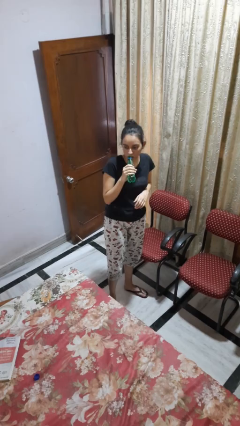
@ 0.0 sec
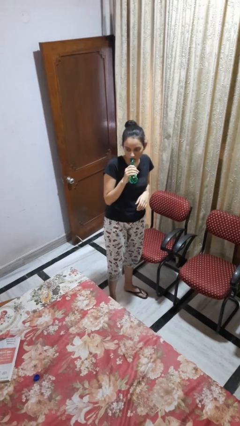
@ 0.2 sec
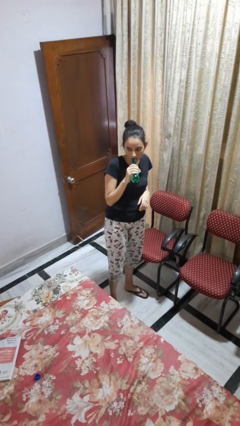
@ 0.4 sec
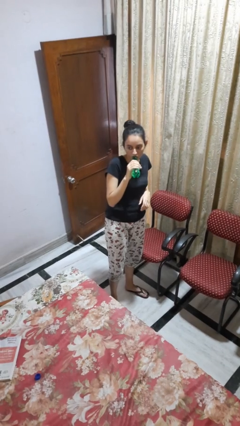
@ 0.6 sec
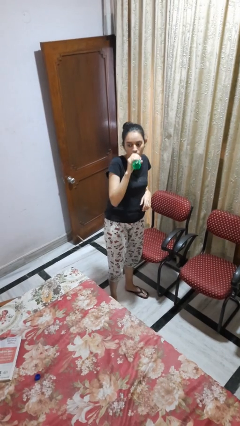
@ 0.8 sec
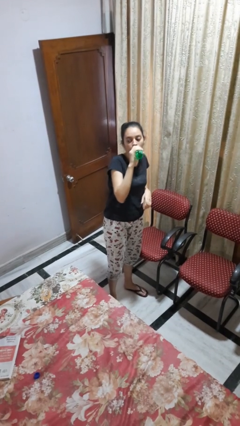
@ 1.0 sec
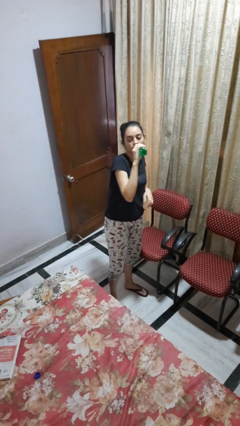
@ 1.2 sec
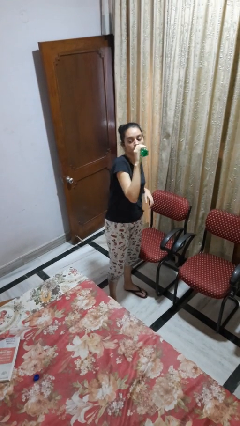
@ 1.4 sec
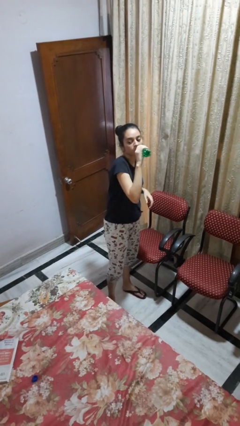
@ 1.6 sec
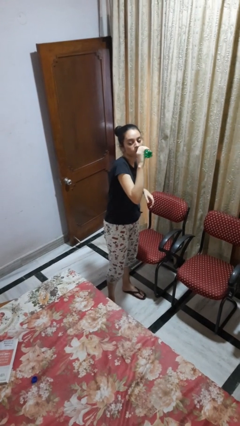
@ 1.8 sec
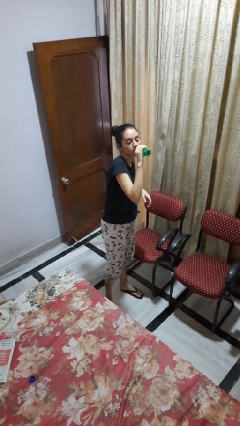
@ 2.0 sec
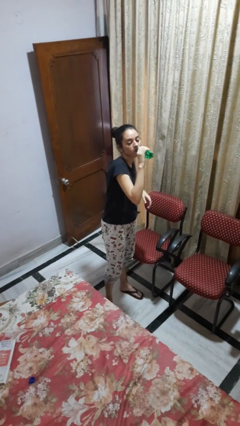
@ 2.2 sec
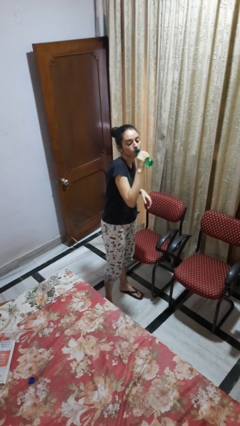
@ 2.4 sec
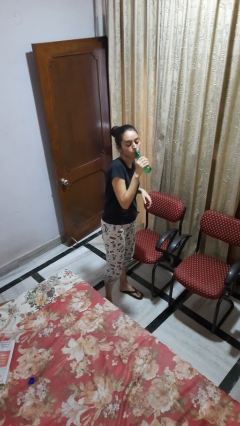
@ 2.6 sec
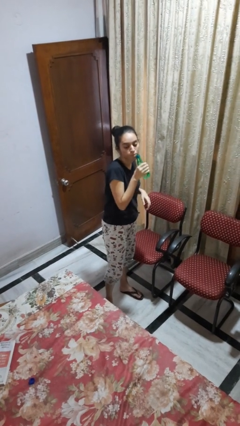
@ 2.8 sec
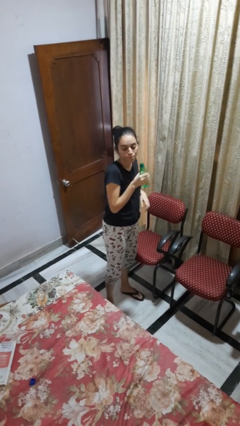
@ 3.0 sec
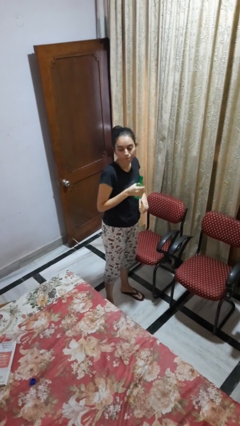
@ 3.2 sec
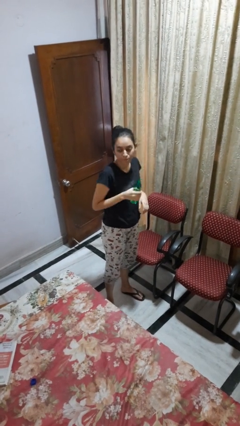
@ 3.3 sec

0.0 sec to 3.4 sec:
person drinks from bottle

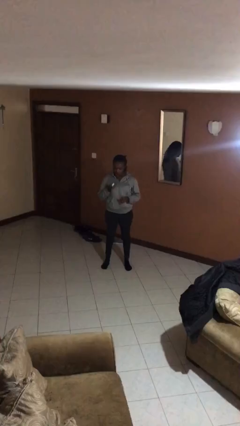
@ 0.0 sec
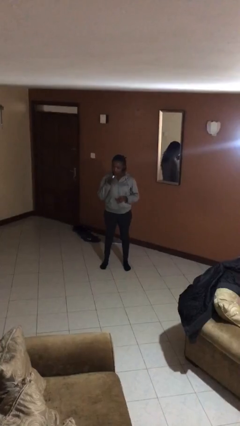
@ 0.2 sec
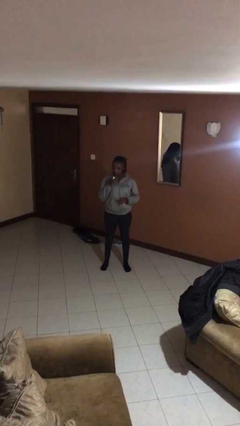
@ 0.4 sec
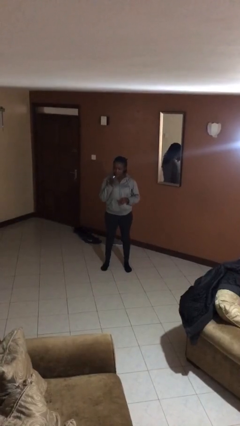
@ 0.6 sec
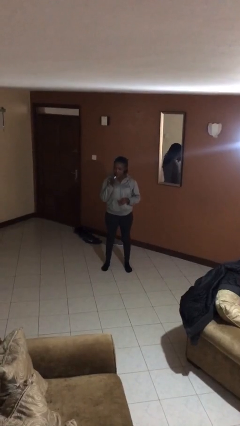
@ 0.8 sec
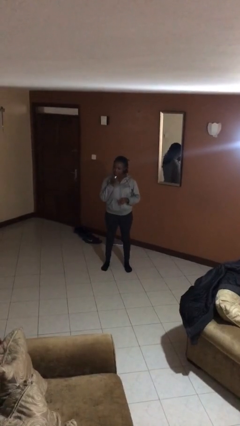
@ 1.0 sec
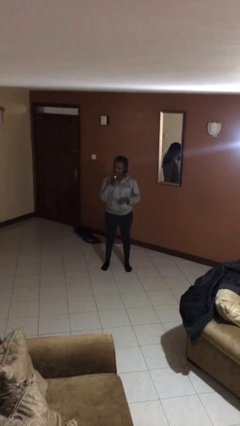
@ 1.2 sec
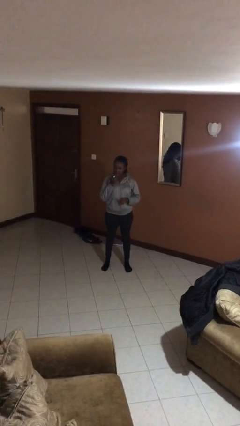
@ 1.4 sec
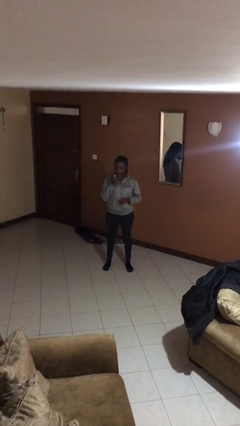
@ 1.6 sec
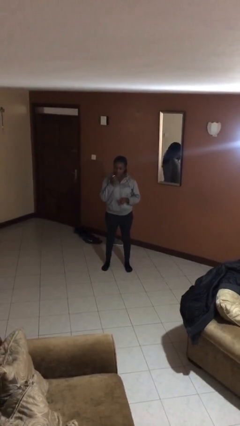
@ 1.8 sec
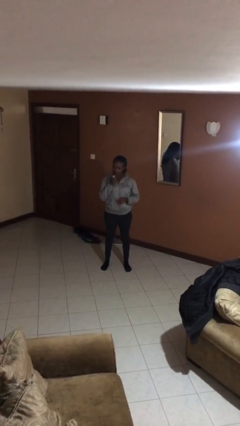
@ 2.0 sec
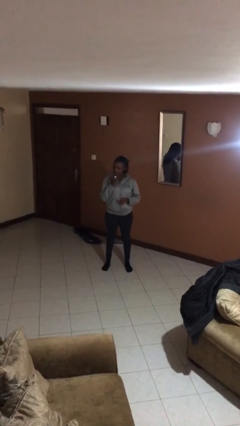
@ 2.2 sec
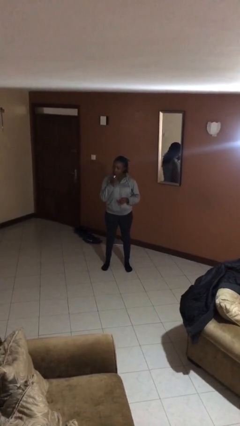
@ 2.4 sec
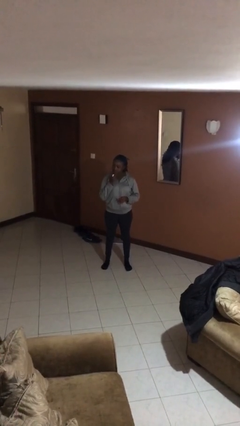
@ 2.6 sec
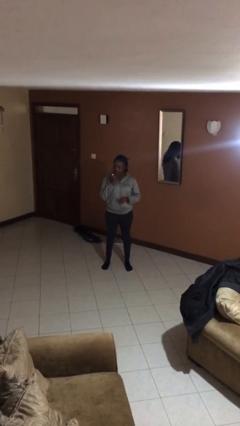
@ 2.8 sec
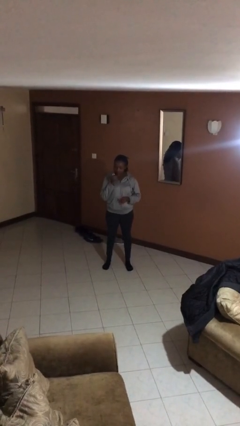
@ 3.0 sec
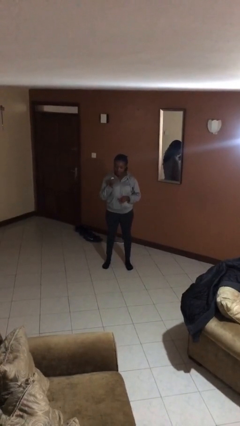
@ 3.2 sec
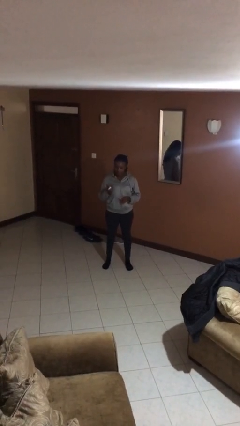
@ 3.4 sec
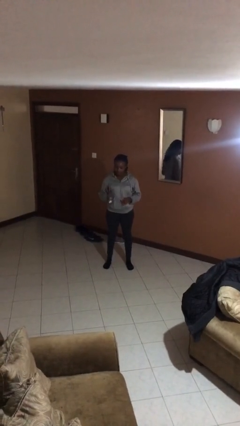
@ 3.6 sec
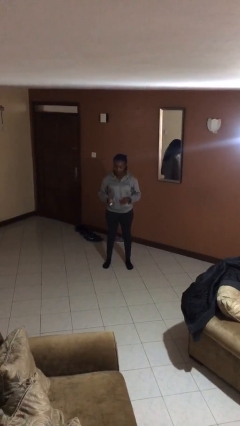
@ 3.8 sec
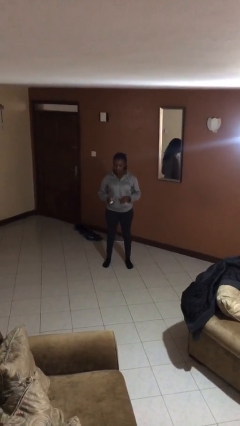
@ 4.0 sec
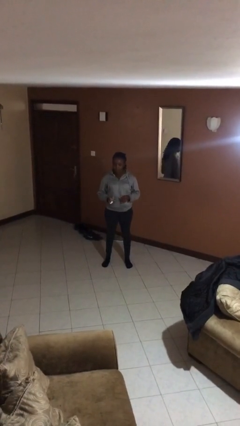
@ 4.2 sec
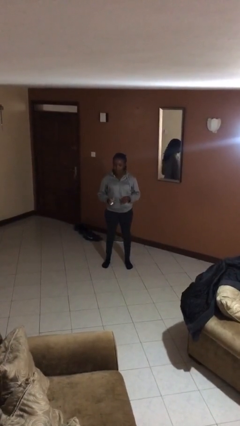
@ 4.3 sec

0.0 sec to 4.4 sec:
person applies lip makeup

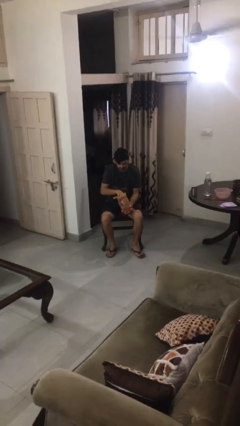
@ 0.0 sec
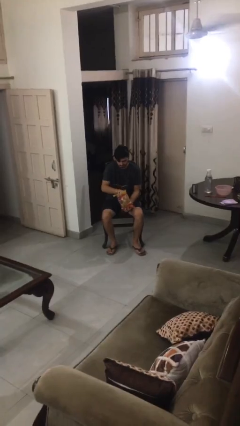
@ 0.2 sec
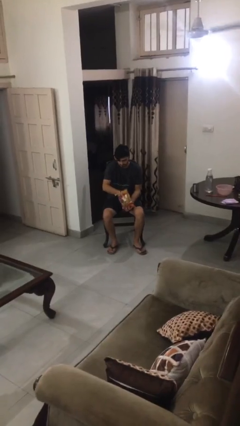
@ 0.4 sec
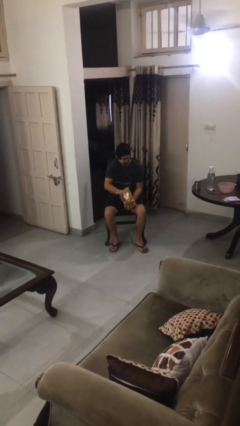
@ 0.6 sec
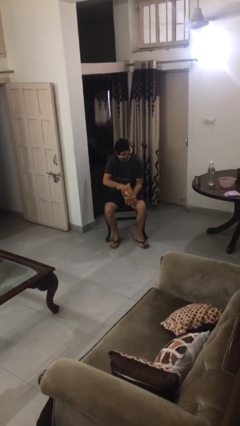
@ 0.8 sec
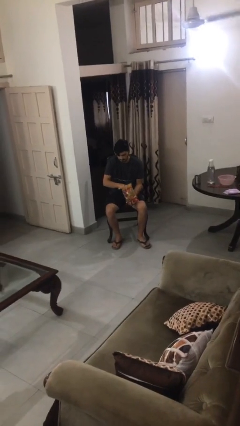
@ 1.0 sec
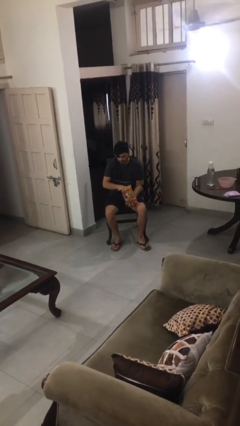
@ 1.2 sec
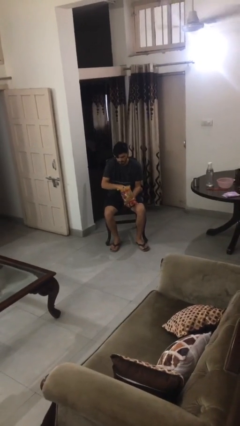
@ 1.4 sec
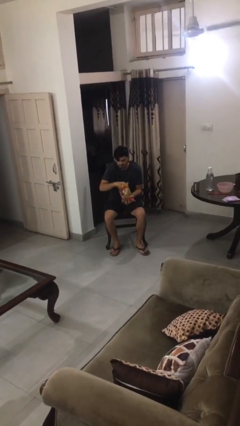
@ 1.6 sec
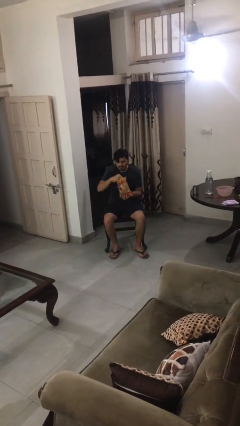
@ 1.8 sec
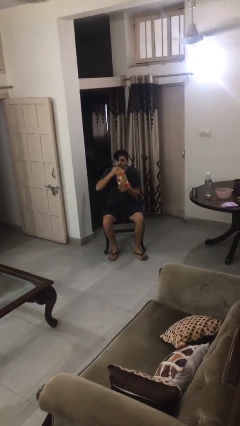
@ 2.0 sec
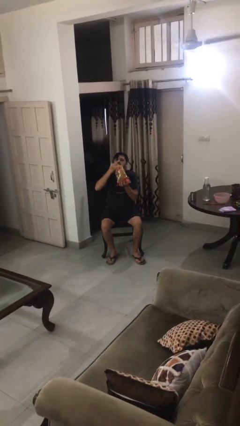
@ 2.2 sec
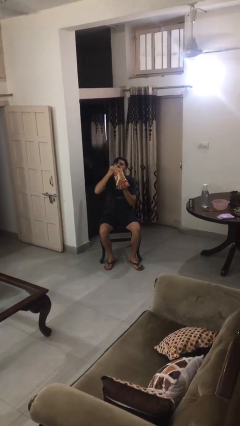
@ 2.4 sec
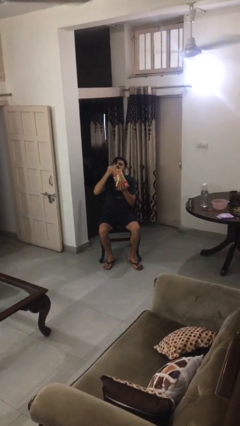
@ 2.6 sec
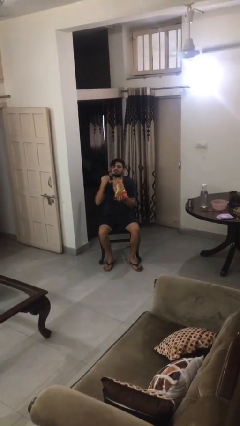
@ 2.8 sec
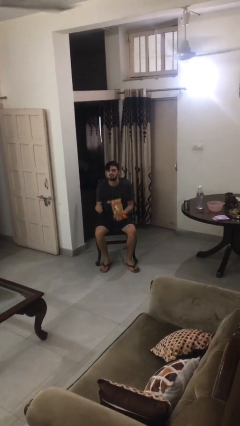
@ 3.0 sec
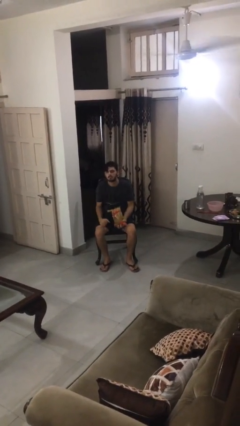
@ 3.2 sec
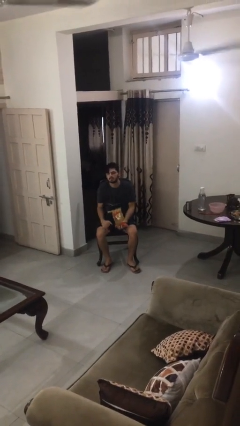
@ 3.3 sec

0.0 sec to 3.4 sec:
person eats snack from bag

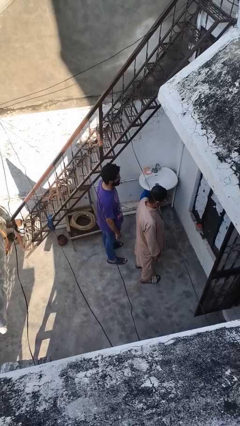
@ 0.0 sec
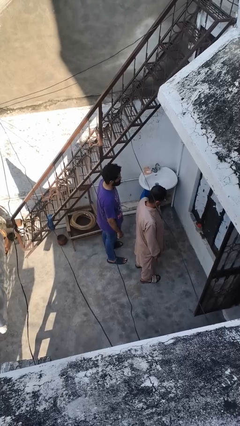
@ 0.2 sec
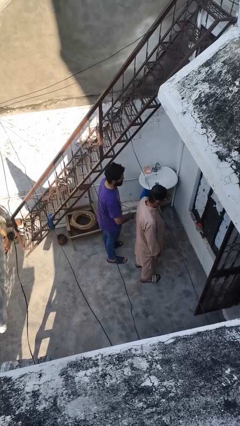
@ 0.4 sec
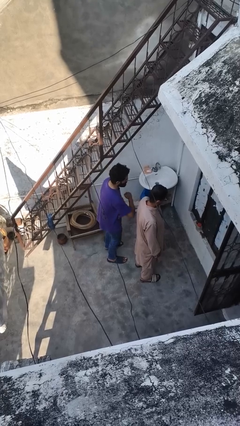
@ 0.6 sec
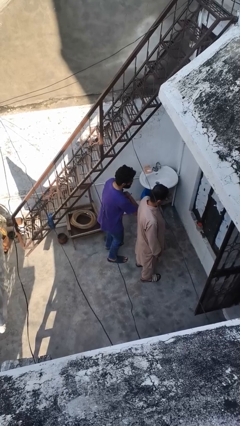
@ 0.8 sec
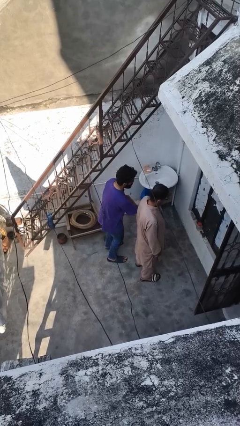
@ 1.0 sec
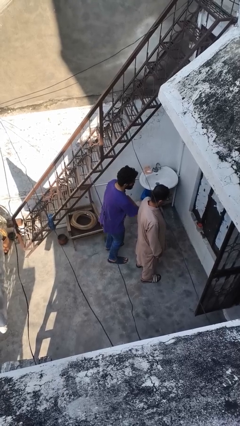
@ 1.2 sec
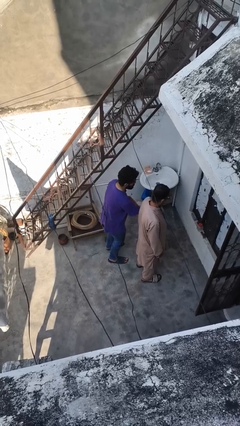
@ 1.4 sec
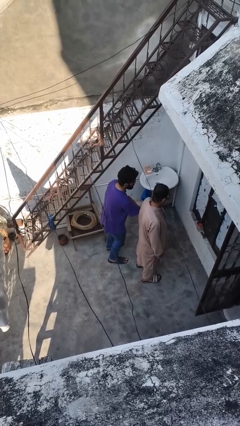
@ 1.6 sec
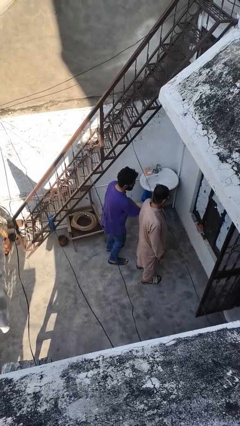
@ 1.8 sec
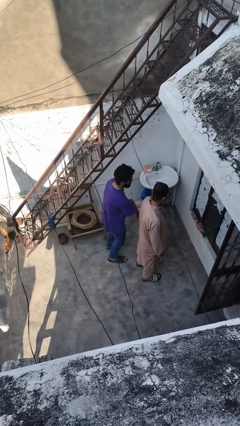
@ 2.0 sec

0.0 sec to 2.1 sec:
person nudges person with elbow

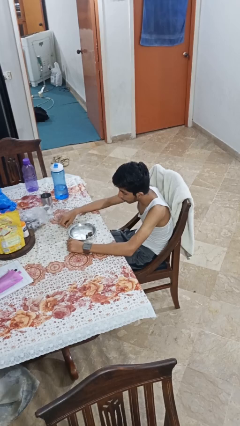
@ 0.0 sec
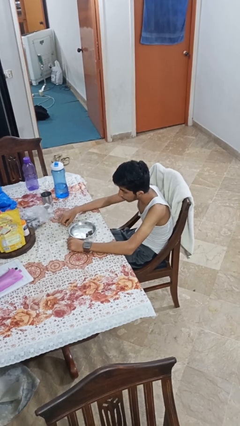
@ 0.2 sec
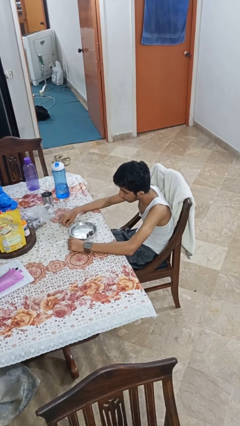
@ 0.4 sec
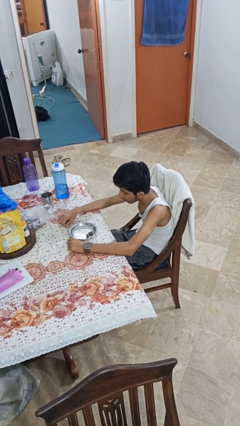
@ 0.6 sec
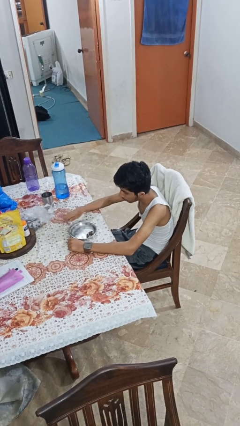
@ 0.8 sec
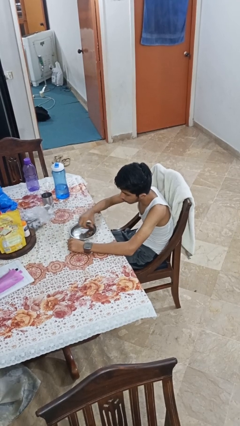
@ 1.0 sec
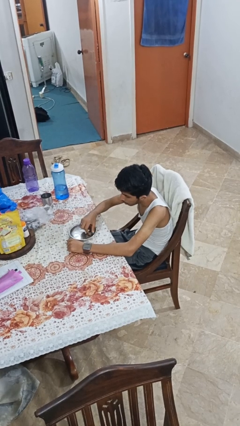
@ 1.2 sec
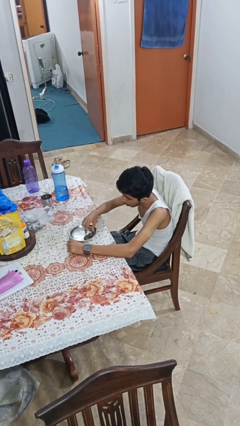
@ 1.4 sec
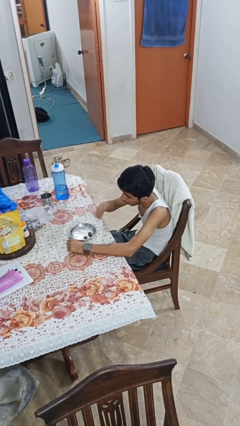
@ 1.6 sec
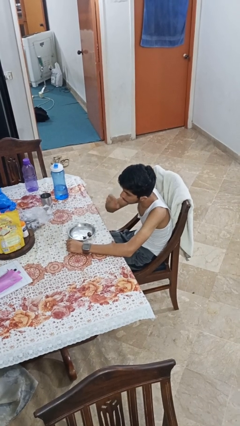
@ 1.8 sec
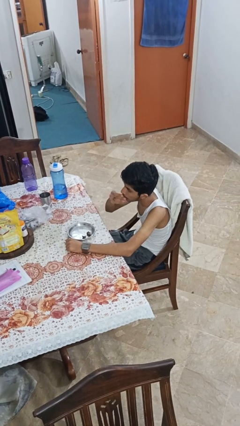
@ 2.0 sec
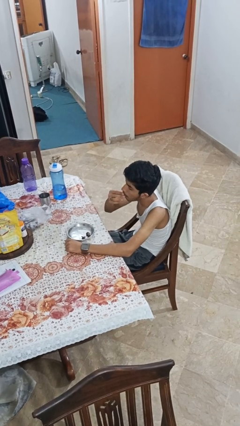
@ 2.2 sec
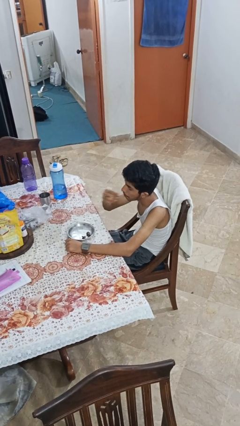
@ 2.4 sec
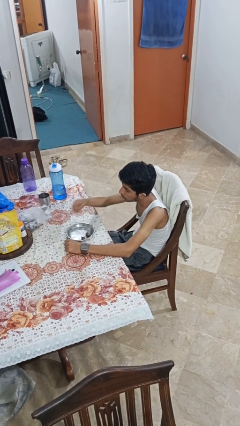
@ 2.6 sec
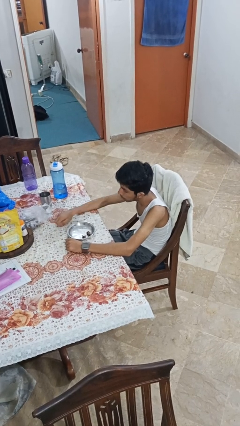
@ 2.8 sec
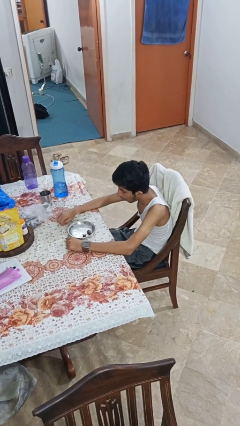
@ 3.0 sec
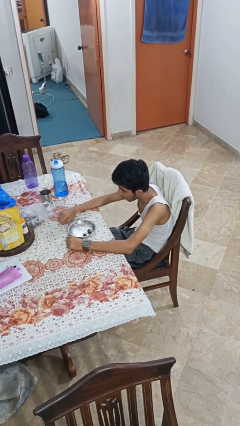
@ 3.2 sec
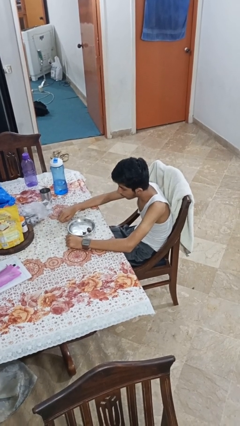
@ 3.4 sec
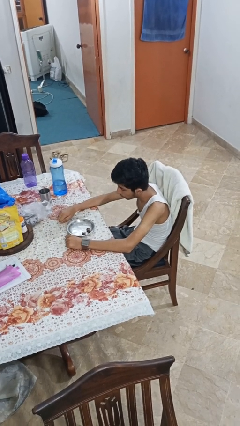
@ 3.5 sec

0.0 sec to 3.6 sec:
person eats with hands

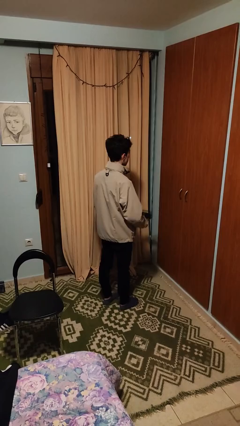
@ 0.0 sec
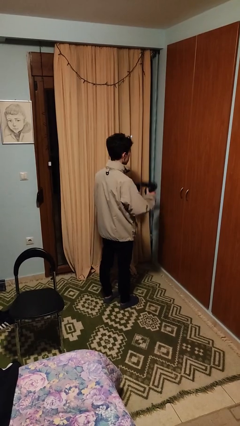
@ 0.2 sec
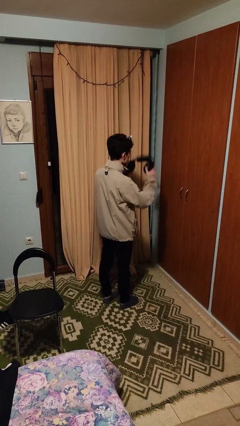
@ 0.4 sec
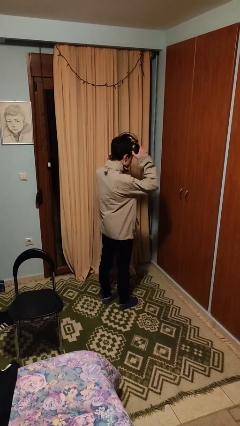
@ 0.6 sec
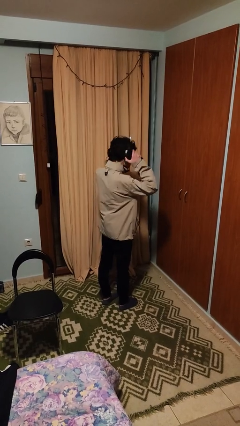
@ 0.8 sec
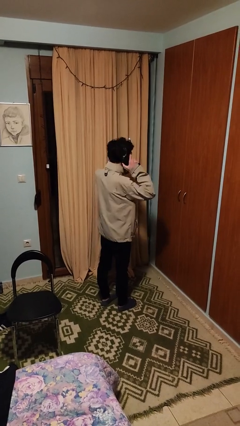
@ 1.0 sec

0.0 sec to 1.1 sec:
person puts on headphones
